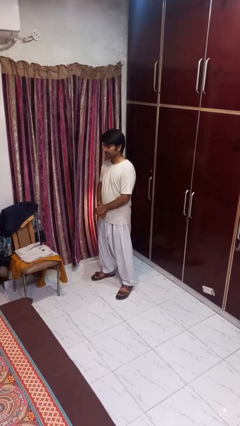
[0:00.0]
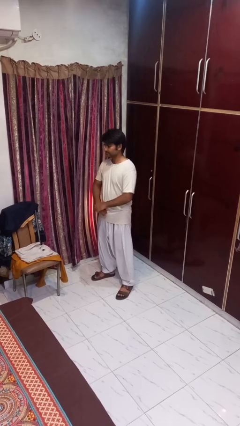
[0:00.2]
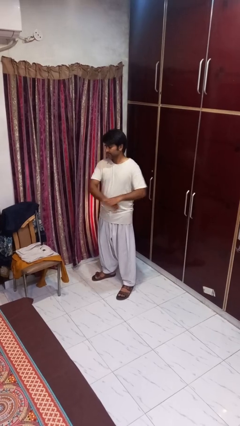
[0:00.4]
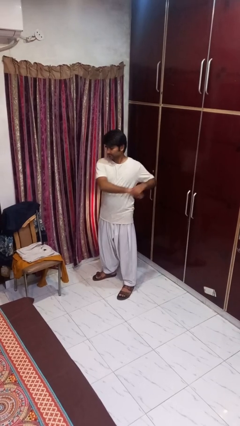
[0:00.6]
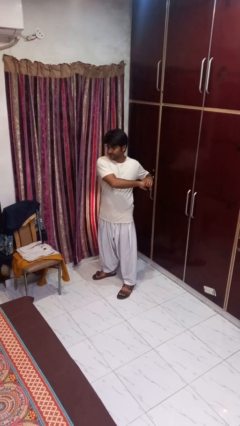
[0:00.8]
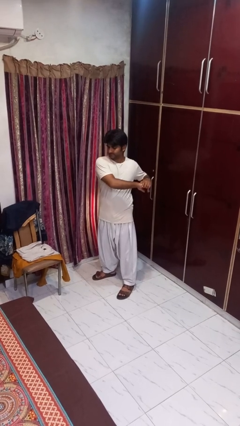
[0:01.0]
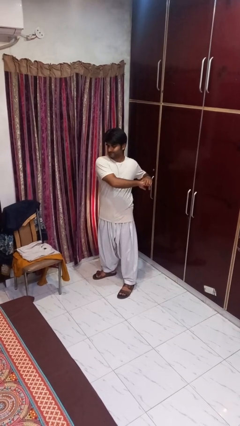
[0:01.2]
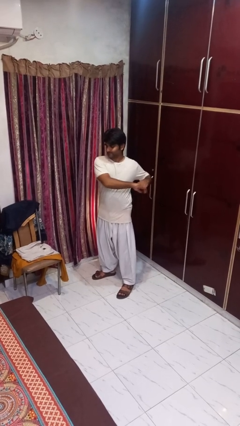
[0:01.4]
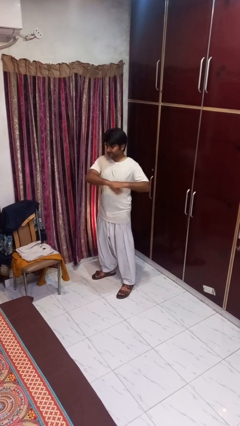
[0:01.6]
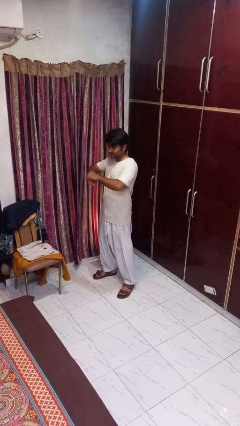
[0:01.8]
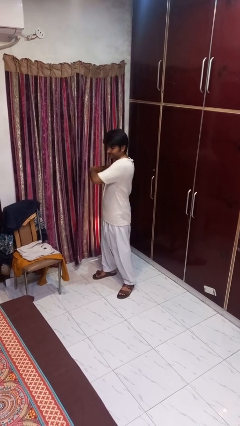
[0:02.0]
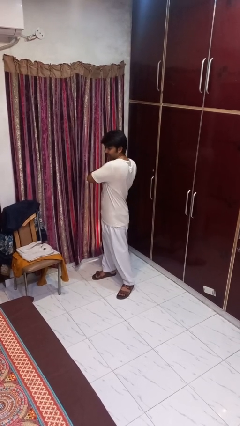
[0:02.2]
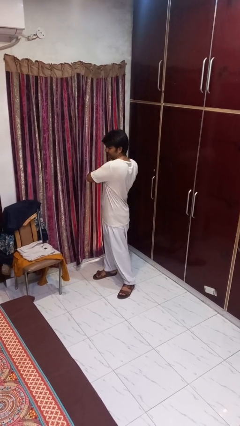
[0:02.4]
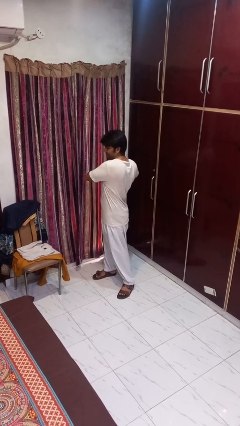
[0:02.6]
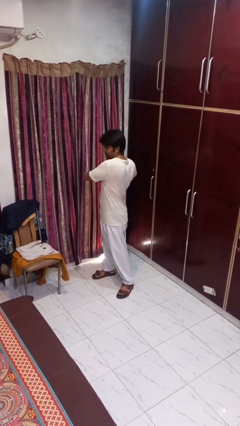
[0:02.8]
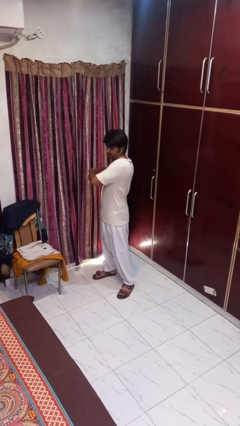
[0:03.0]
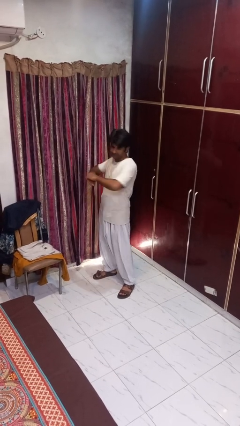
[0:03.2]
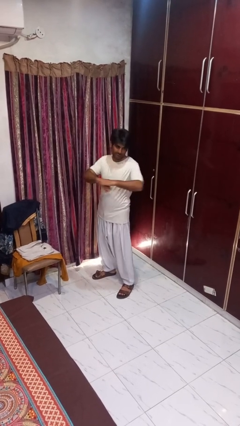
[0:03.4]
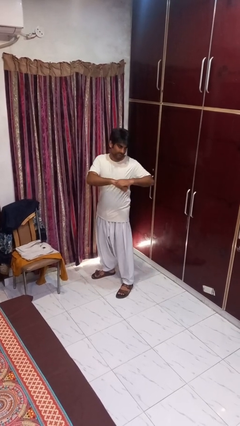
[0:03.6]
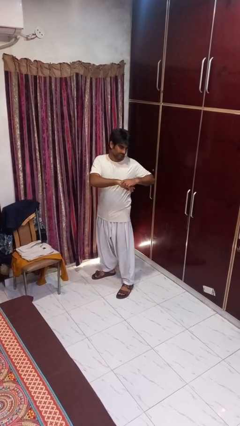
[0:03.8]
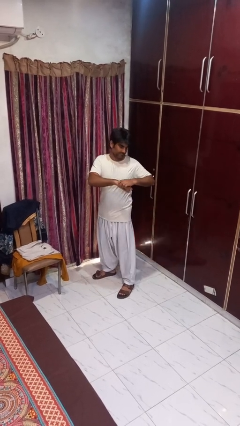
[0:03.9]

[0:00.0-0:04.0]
person stretches arms to side

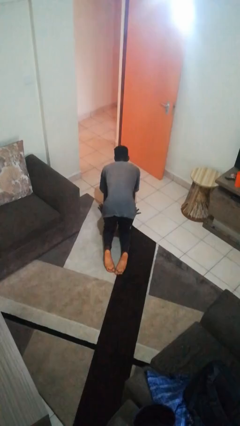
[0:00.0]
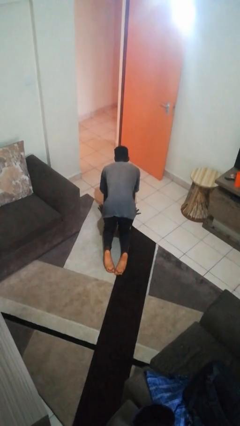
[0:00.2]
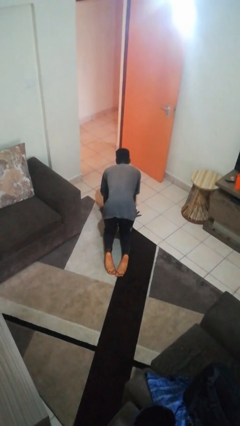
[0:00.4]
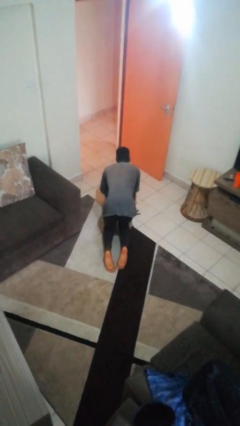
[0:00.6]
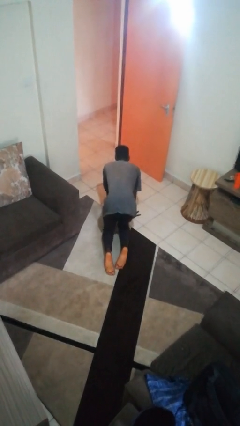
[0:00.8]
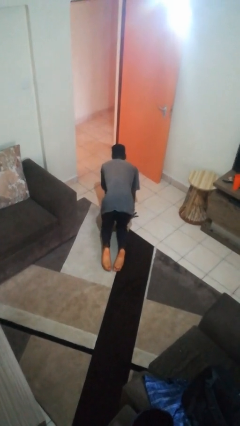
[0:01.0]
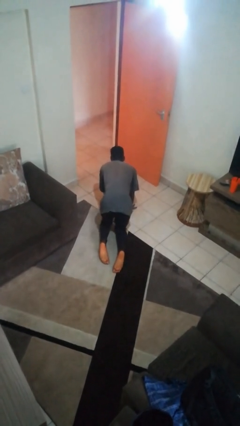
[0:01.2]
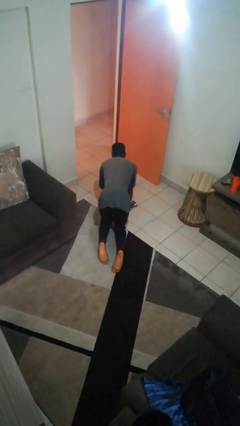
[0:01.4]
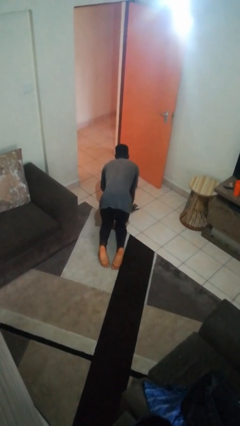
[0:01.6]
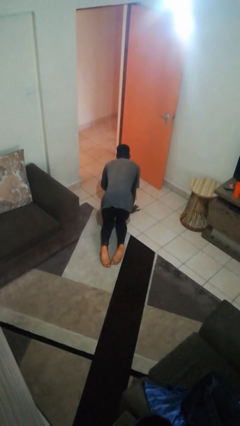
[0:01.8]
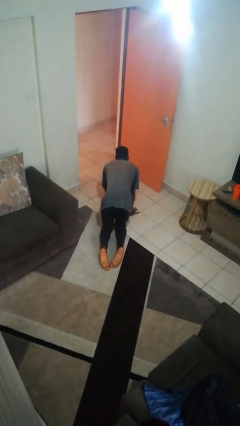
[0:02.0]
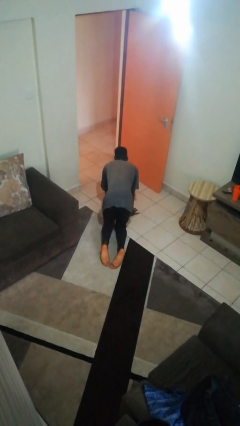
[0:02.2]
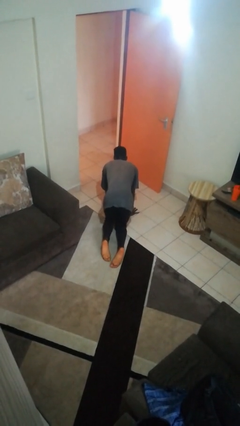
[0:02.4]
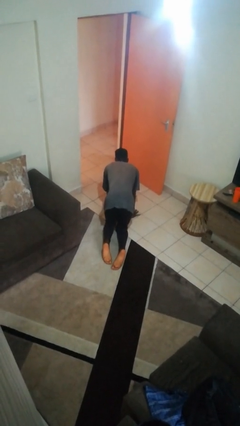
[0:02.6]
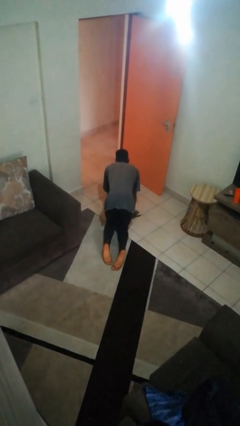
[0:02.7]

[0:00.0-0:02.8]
person crawls

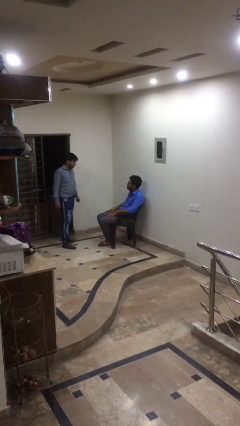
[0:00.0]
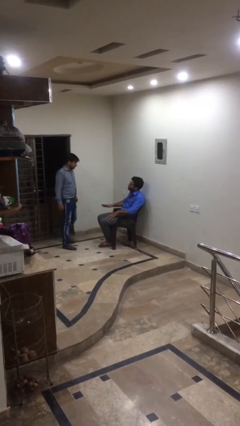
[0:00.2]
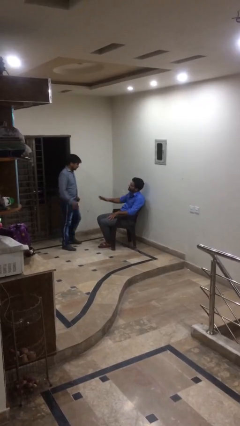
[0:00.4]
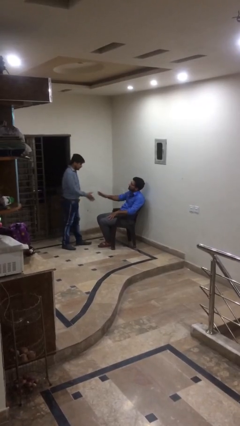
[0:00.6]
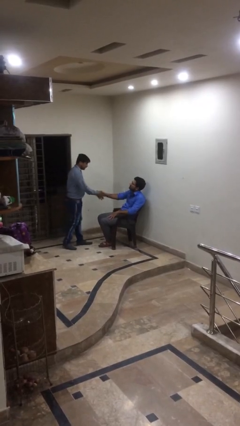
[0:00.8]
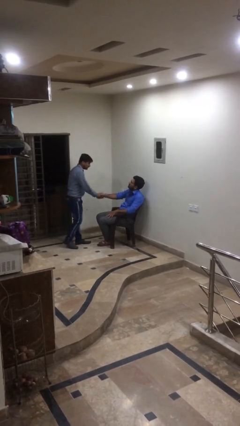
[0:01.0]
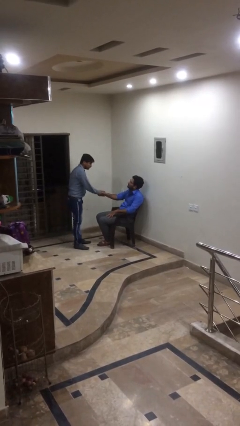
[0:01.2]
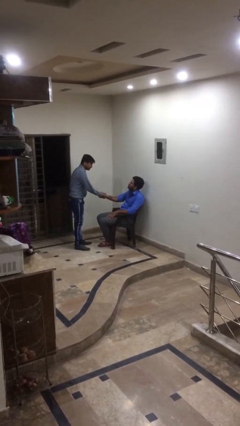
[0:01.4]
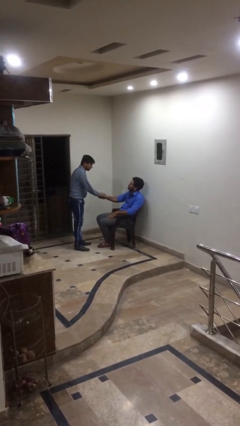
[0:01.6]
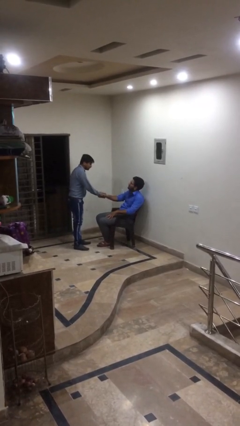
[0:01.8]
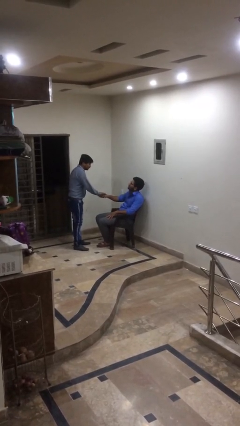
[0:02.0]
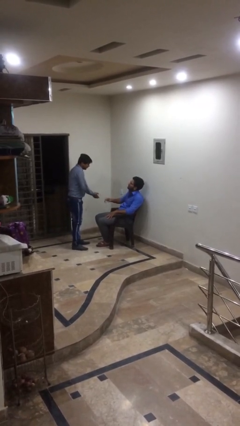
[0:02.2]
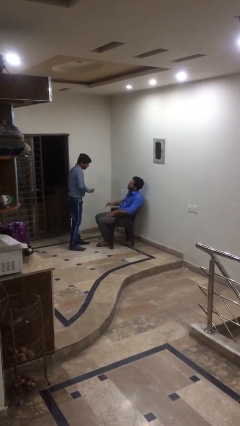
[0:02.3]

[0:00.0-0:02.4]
person shakes hand

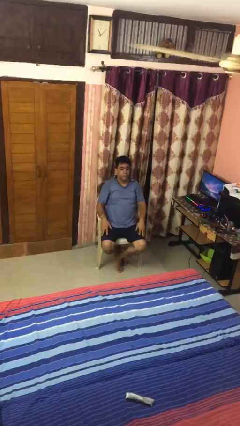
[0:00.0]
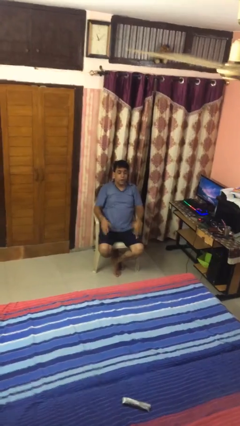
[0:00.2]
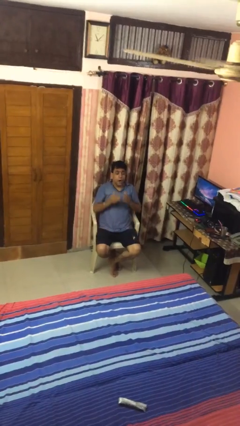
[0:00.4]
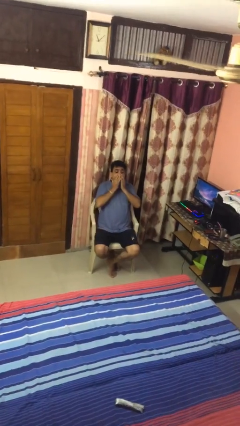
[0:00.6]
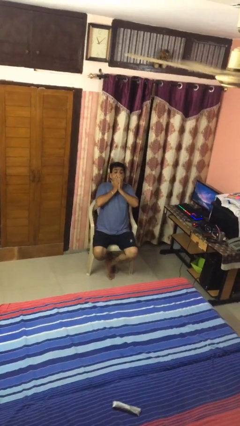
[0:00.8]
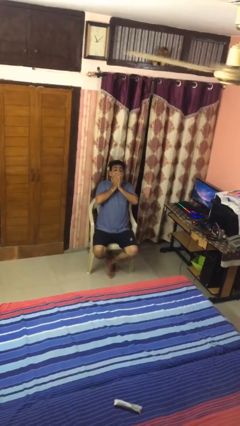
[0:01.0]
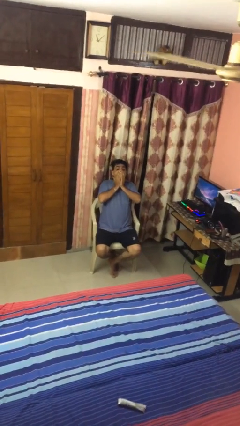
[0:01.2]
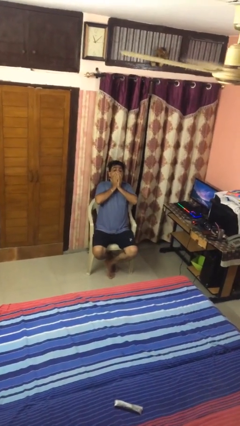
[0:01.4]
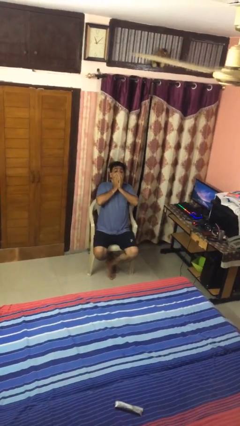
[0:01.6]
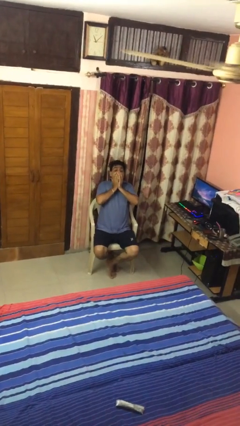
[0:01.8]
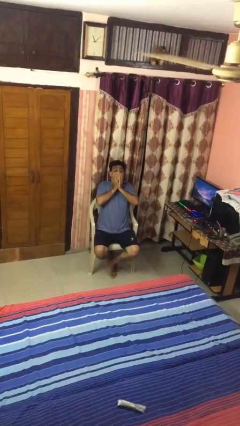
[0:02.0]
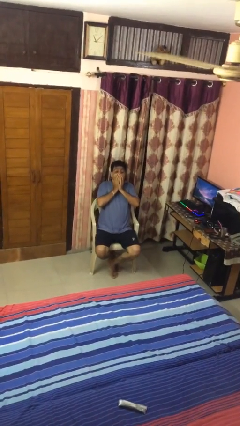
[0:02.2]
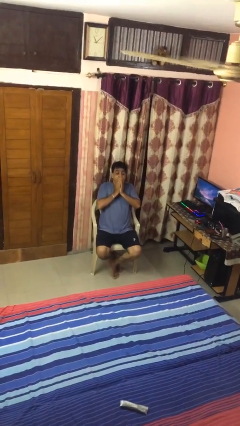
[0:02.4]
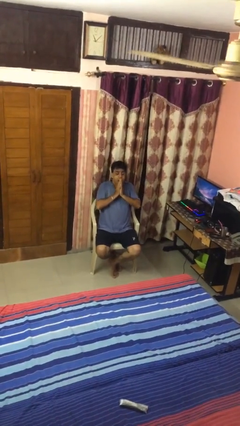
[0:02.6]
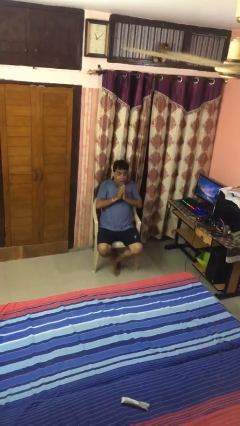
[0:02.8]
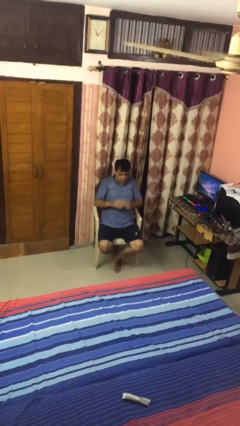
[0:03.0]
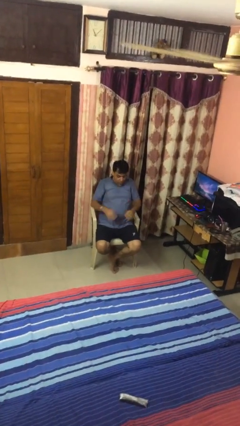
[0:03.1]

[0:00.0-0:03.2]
person covers face with hands

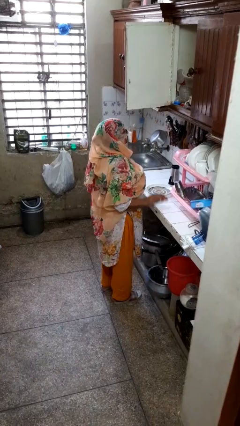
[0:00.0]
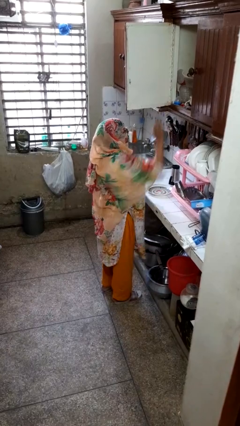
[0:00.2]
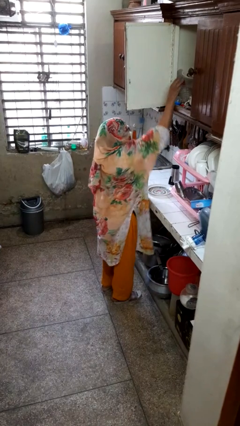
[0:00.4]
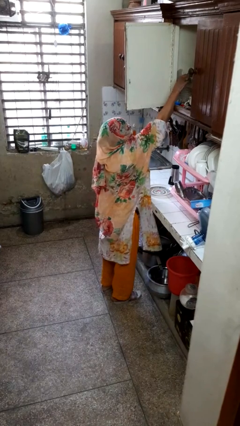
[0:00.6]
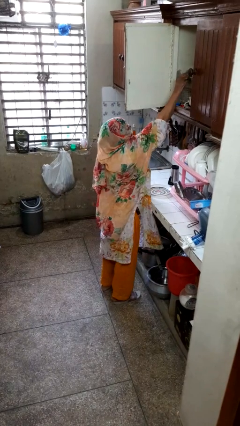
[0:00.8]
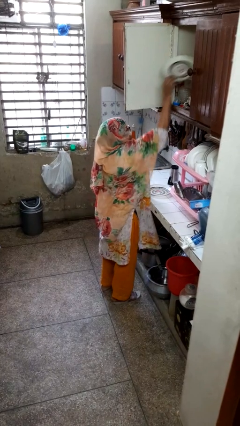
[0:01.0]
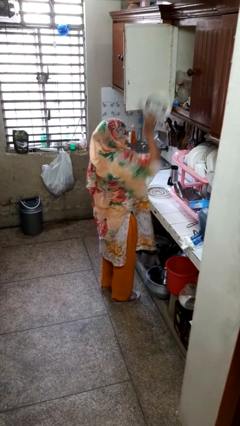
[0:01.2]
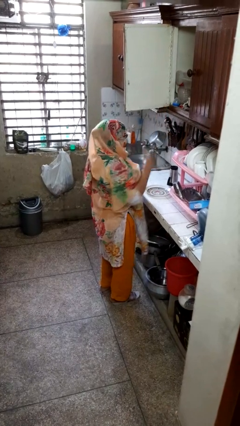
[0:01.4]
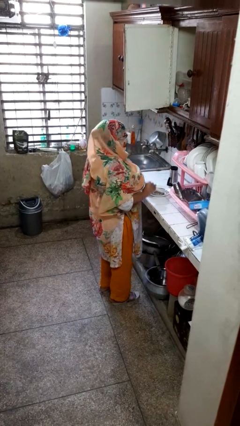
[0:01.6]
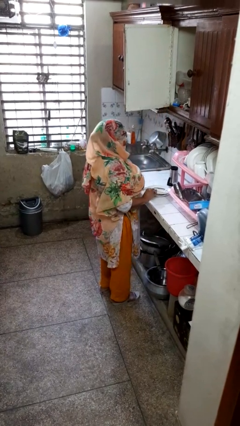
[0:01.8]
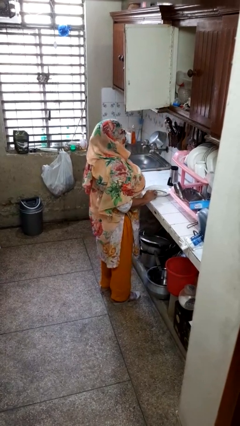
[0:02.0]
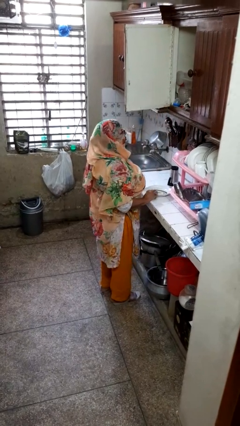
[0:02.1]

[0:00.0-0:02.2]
person takes object from cabinet

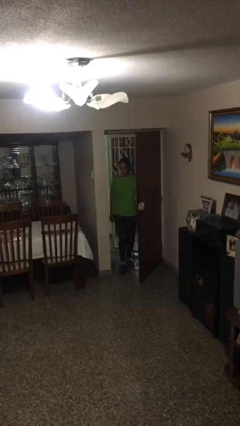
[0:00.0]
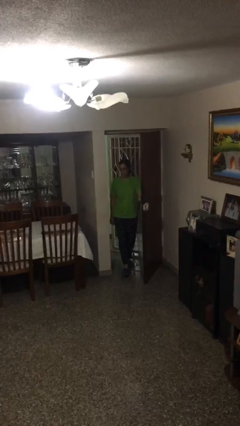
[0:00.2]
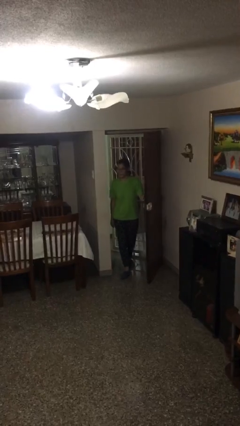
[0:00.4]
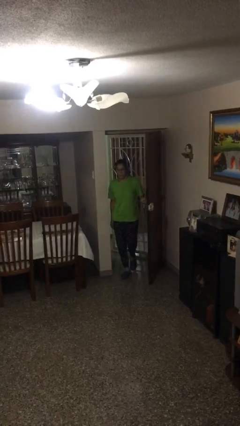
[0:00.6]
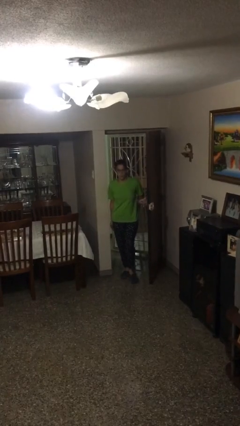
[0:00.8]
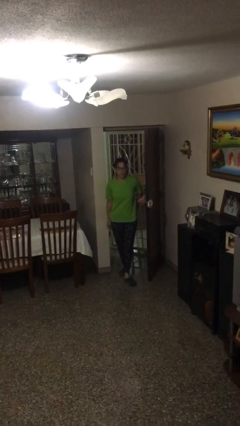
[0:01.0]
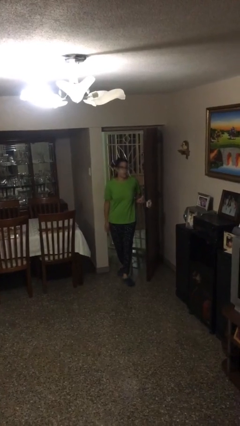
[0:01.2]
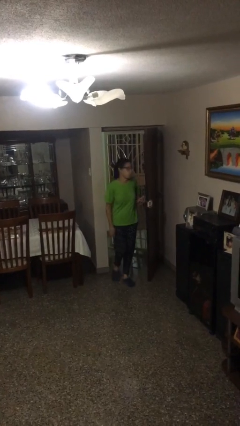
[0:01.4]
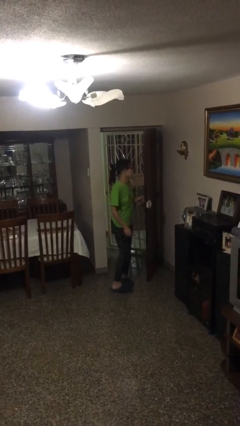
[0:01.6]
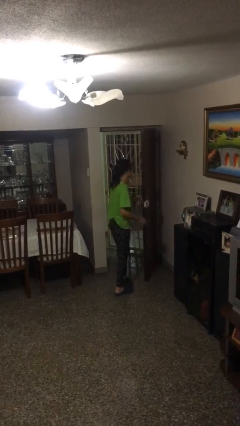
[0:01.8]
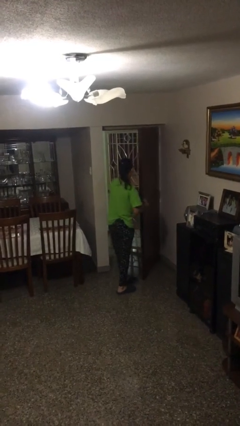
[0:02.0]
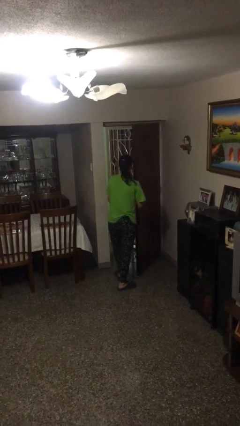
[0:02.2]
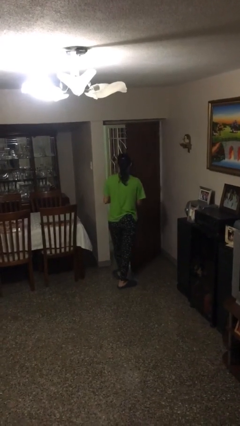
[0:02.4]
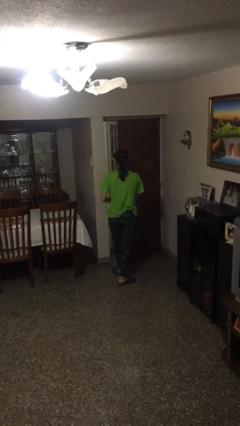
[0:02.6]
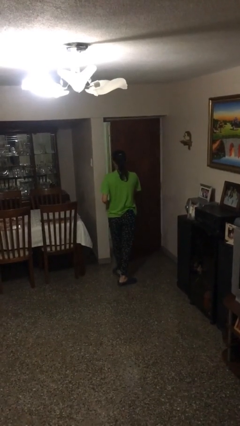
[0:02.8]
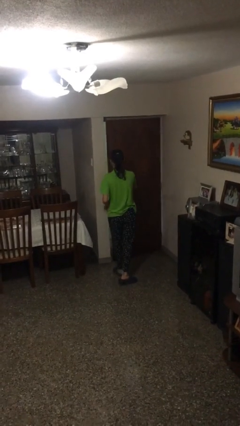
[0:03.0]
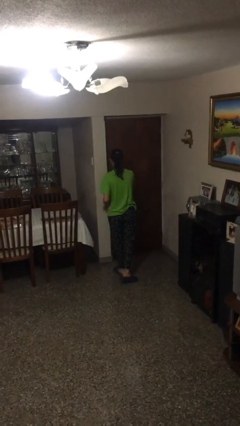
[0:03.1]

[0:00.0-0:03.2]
person enters scene through structure
